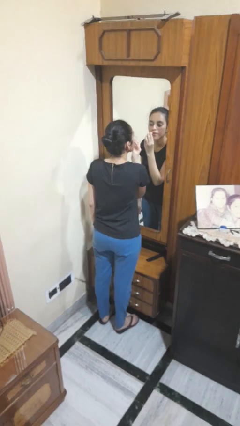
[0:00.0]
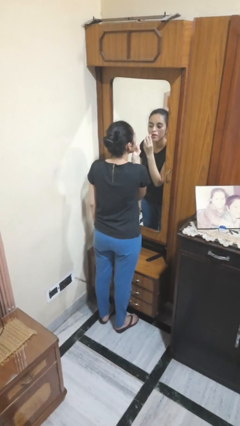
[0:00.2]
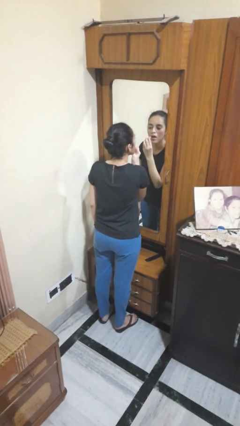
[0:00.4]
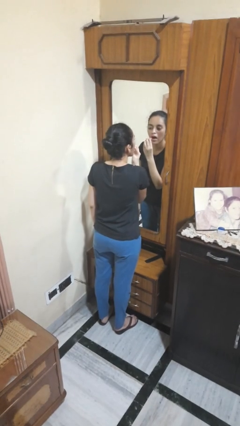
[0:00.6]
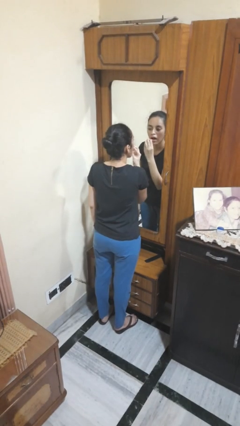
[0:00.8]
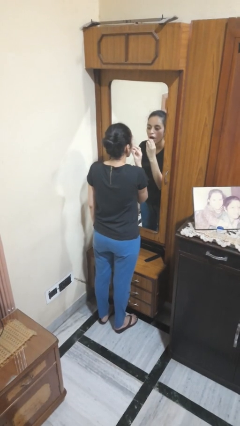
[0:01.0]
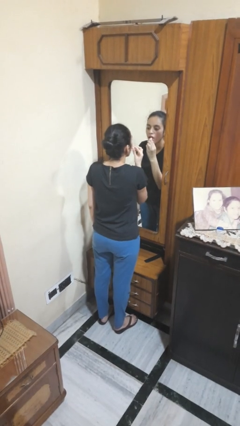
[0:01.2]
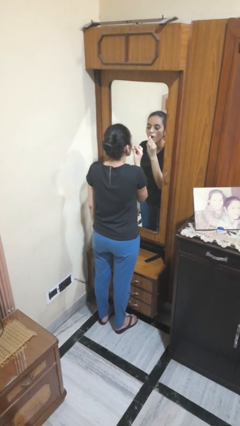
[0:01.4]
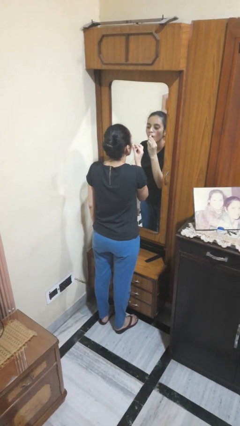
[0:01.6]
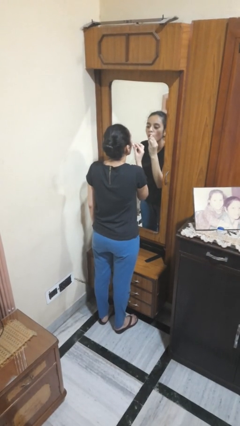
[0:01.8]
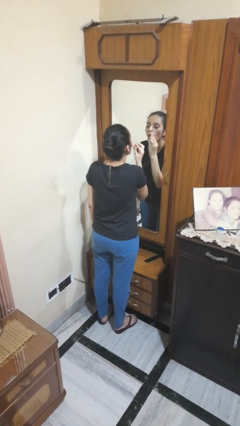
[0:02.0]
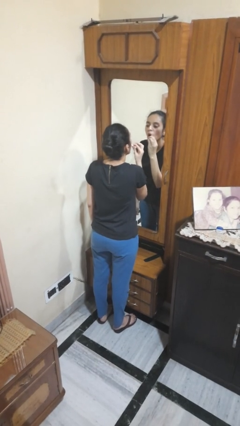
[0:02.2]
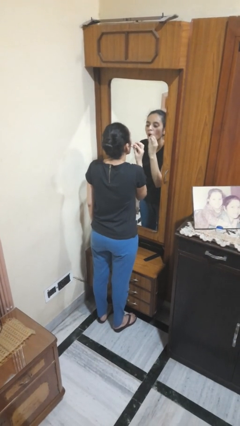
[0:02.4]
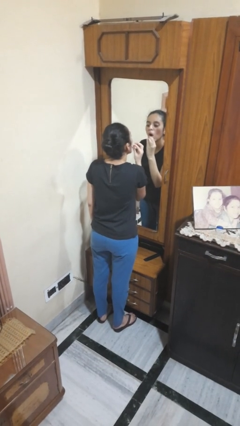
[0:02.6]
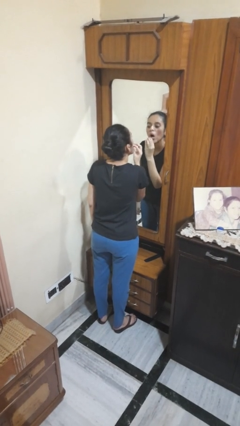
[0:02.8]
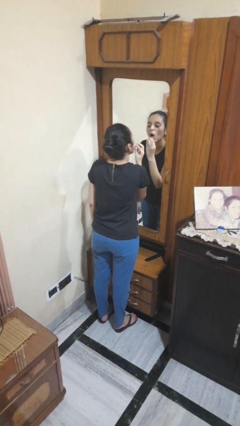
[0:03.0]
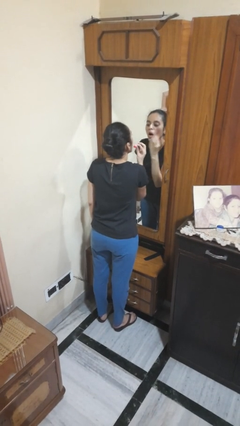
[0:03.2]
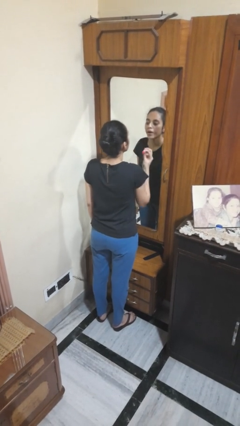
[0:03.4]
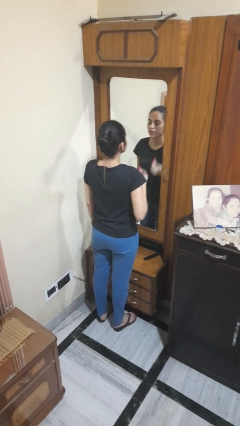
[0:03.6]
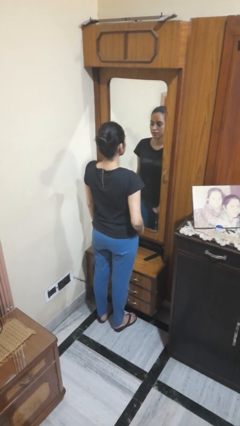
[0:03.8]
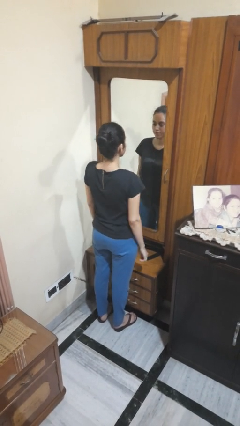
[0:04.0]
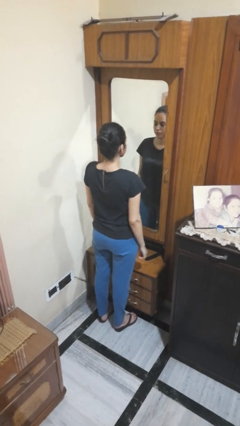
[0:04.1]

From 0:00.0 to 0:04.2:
person applies lip makeup

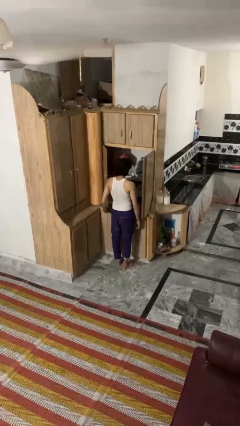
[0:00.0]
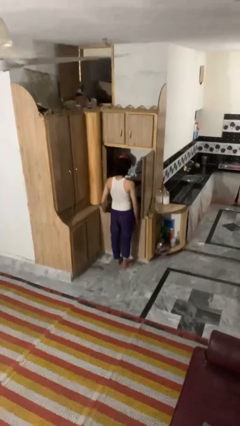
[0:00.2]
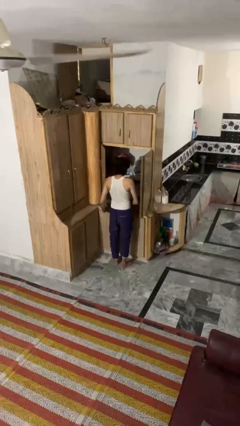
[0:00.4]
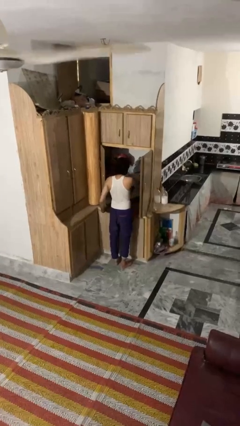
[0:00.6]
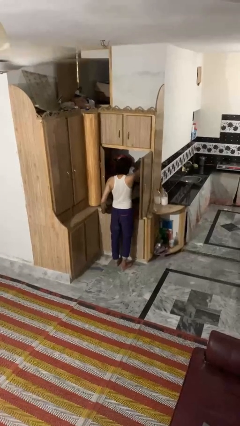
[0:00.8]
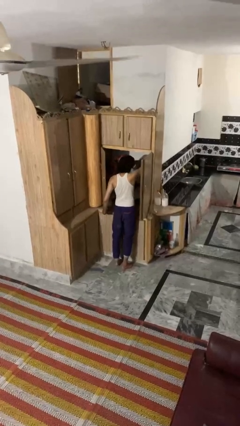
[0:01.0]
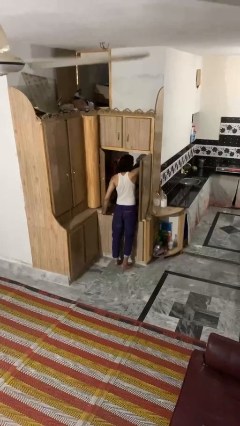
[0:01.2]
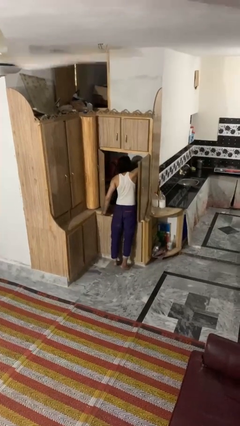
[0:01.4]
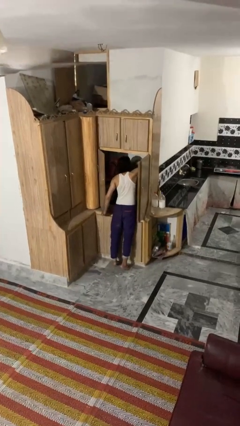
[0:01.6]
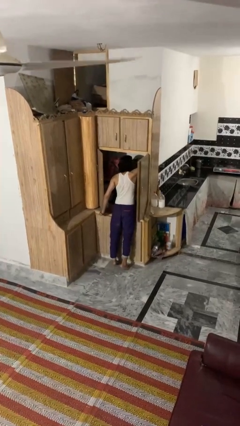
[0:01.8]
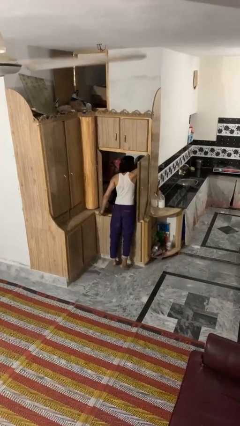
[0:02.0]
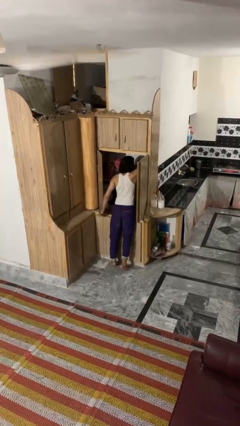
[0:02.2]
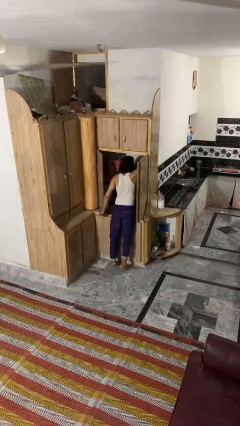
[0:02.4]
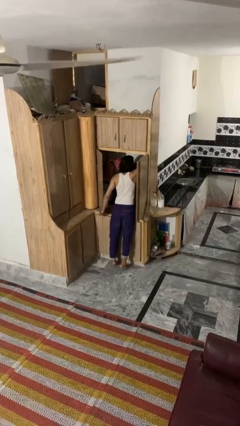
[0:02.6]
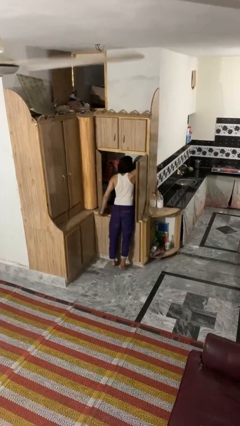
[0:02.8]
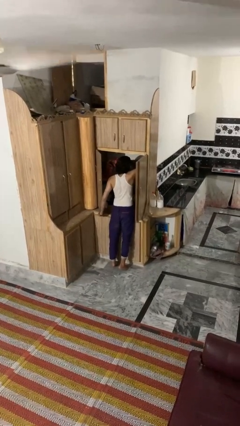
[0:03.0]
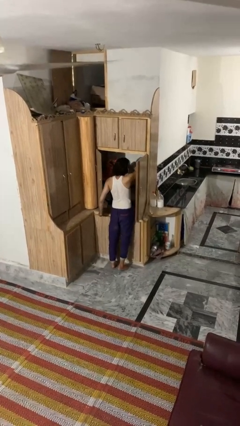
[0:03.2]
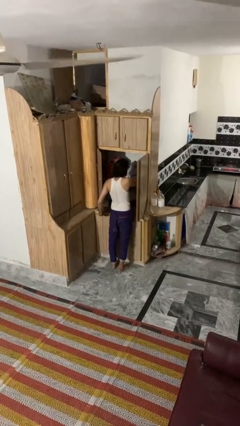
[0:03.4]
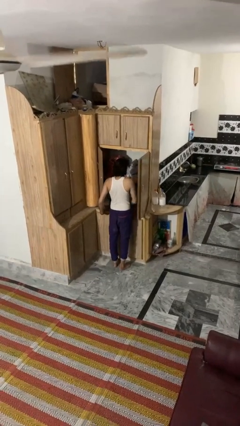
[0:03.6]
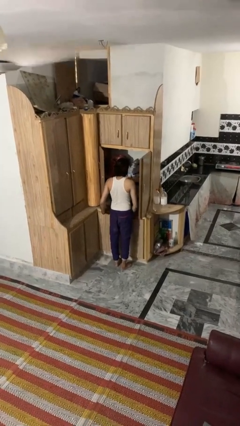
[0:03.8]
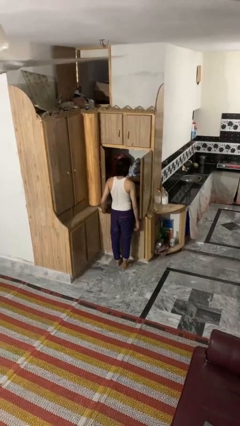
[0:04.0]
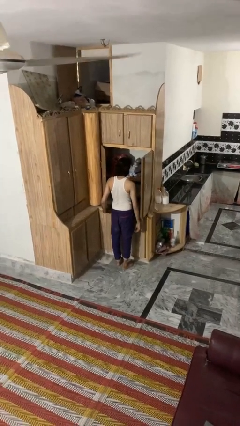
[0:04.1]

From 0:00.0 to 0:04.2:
person searches in cabinet

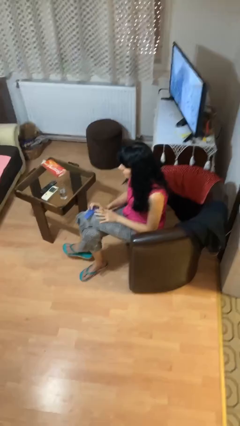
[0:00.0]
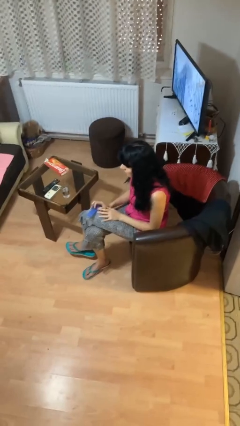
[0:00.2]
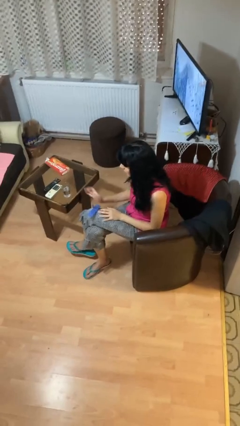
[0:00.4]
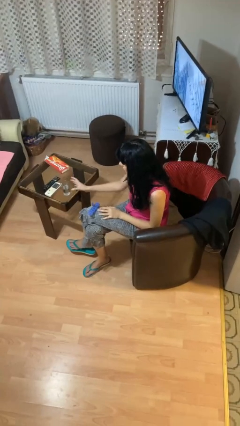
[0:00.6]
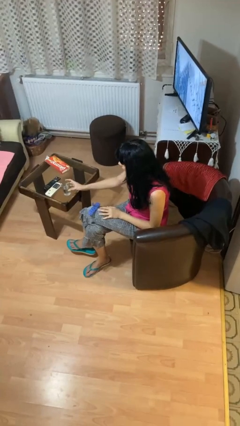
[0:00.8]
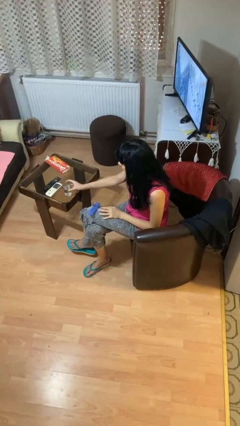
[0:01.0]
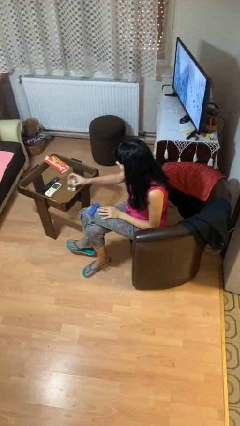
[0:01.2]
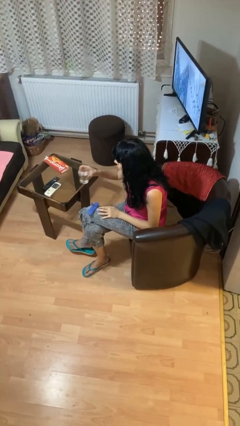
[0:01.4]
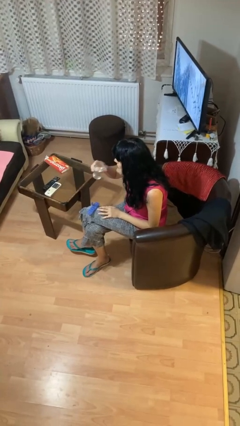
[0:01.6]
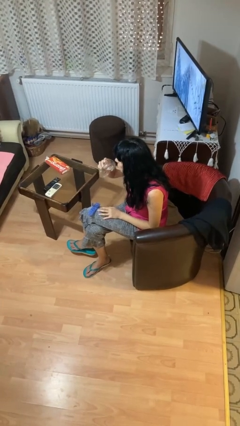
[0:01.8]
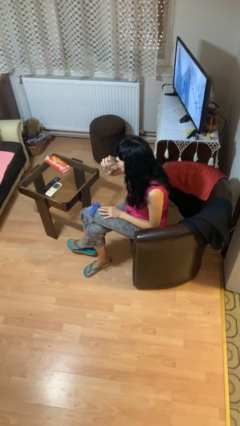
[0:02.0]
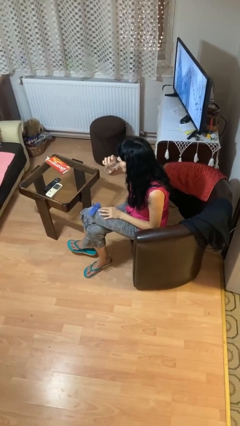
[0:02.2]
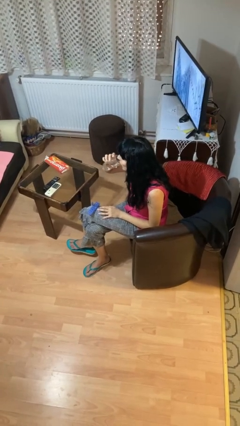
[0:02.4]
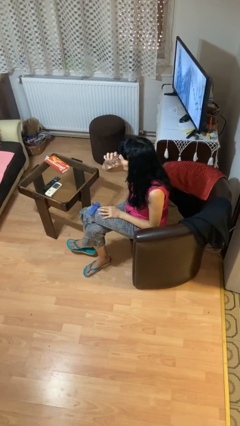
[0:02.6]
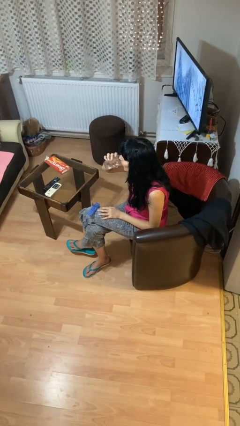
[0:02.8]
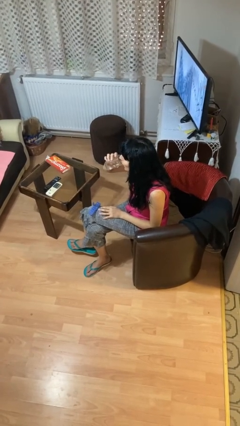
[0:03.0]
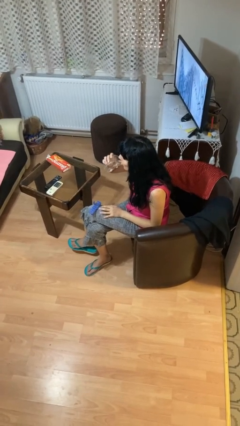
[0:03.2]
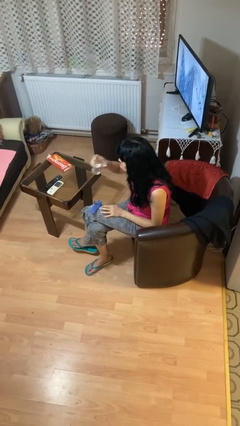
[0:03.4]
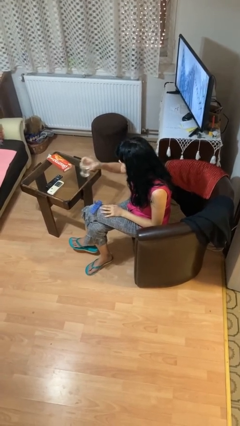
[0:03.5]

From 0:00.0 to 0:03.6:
person drinks from cup

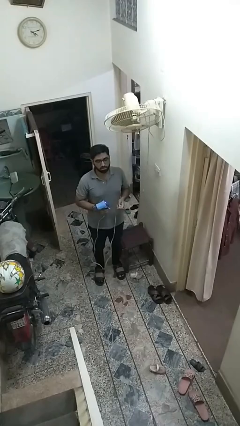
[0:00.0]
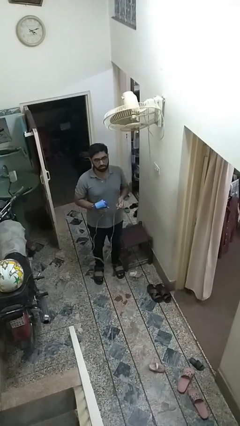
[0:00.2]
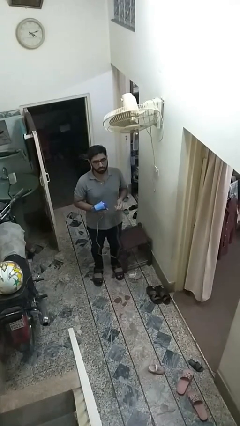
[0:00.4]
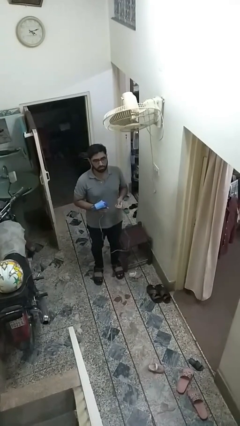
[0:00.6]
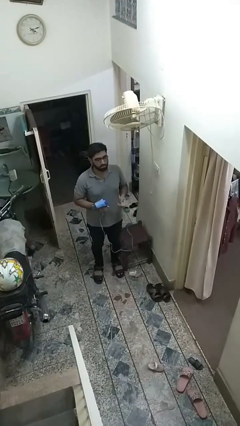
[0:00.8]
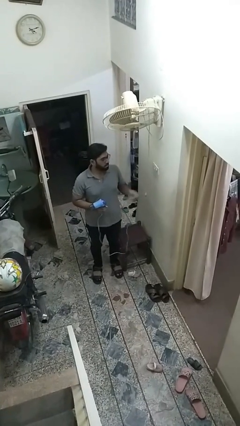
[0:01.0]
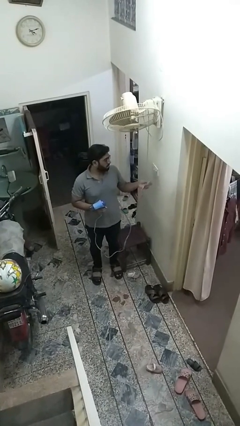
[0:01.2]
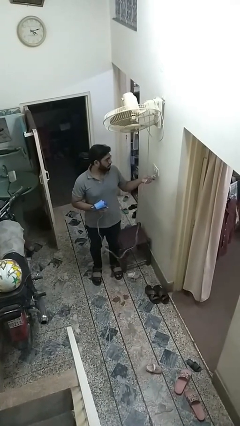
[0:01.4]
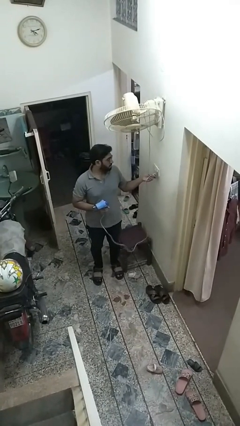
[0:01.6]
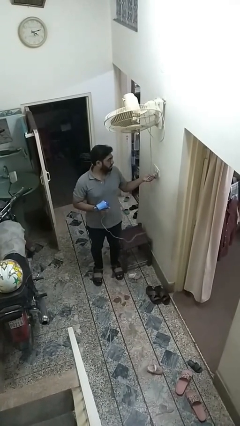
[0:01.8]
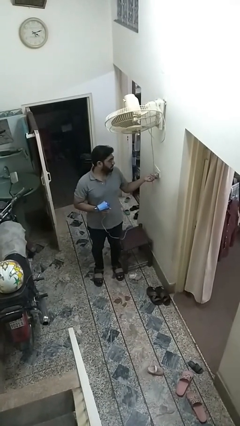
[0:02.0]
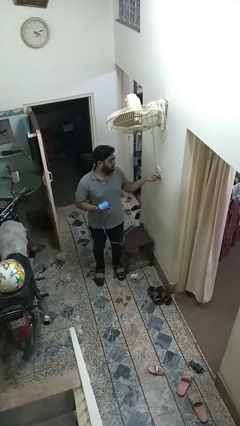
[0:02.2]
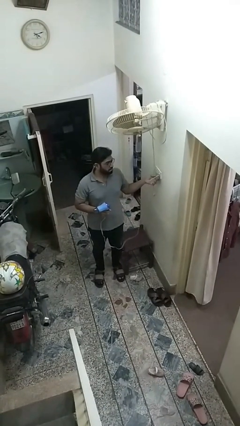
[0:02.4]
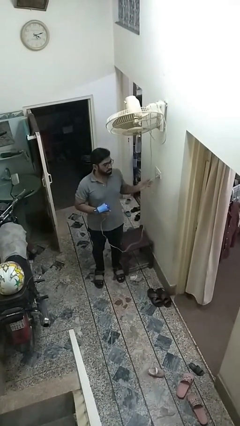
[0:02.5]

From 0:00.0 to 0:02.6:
person plugs into electrical socket

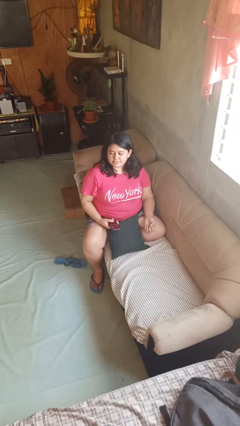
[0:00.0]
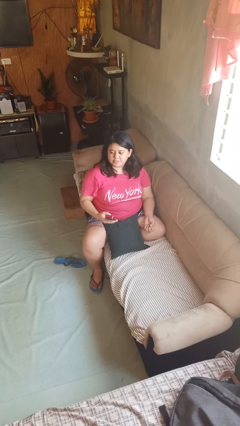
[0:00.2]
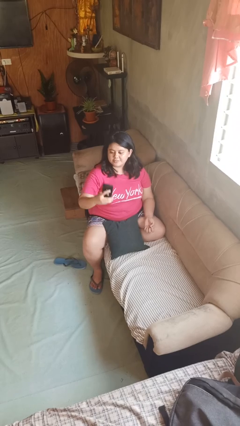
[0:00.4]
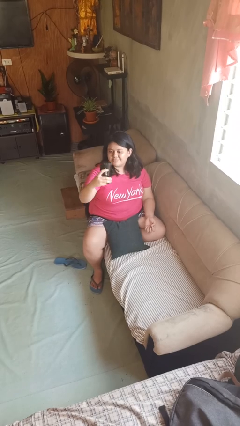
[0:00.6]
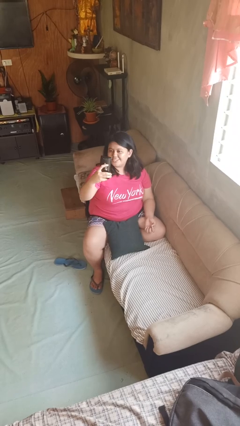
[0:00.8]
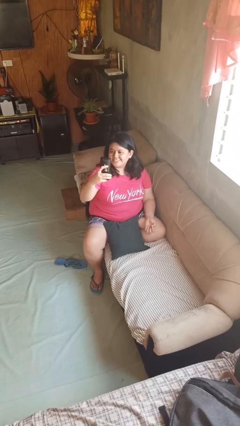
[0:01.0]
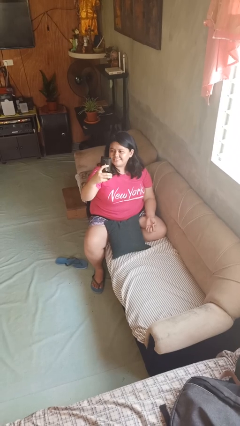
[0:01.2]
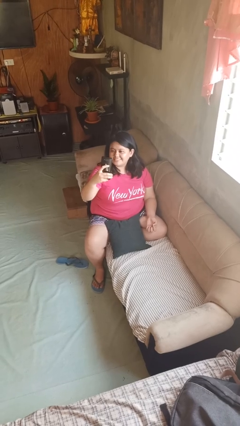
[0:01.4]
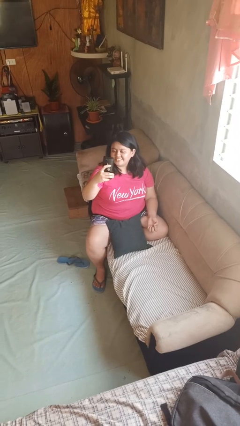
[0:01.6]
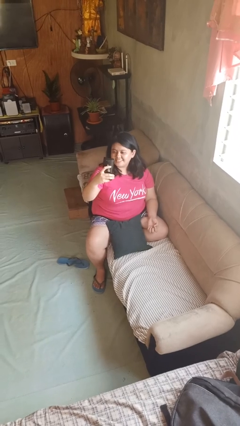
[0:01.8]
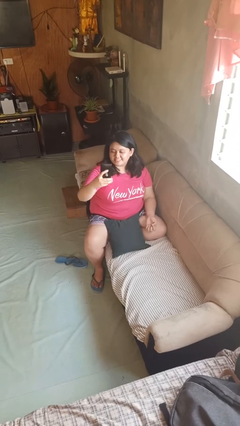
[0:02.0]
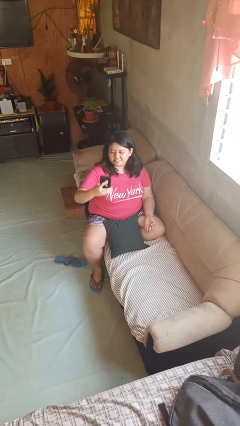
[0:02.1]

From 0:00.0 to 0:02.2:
person takes selfie

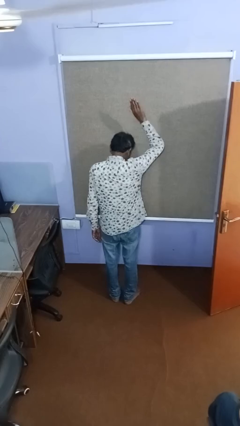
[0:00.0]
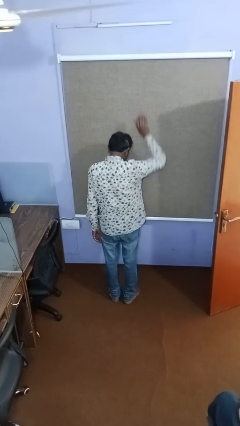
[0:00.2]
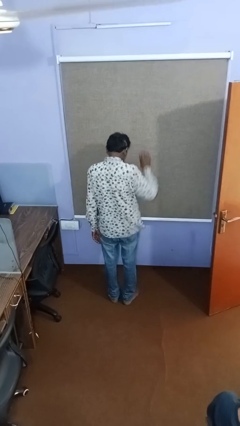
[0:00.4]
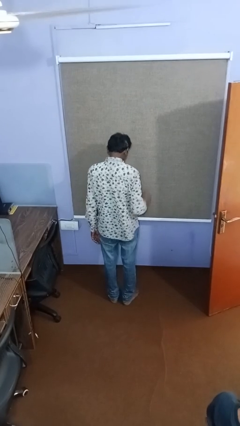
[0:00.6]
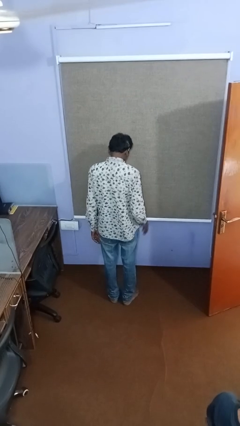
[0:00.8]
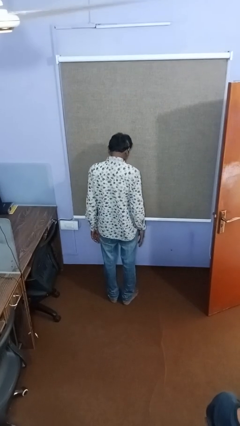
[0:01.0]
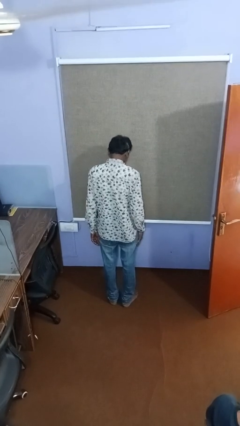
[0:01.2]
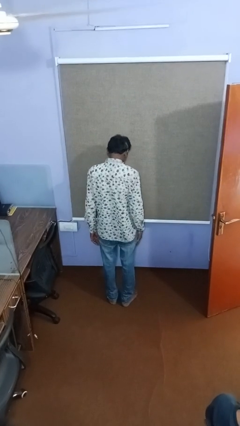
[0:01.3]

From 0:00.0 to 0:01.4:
person gestures lower hand
